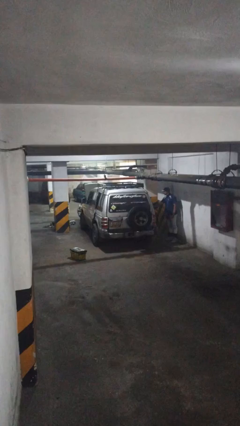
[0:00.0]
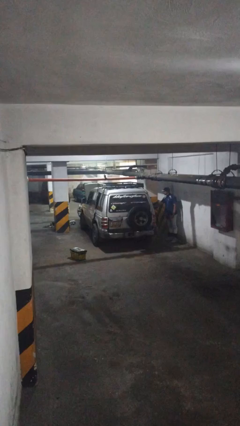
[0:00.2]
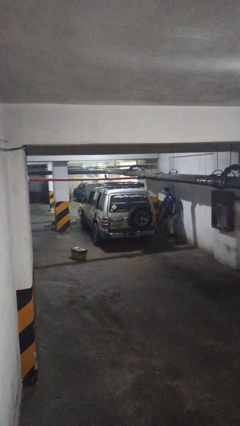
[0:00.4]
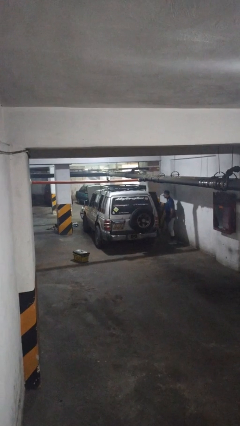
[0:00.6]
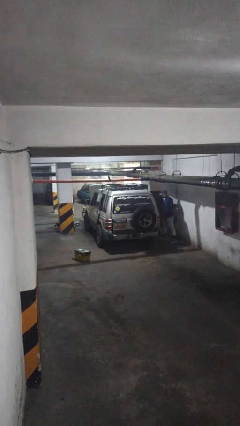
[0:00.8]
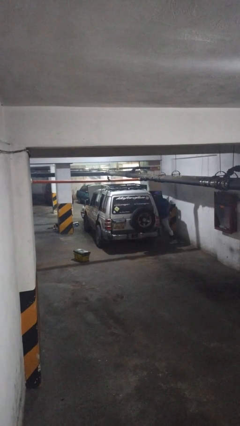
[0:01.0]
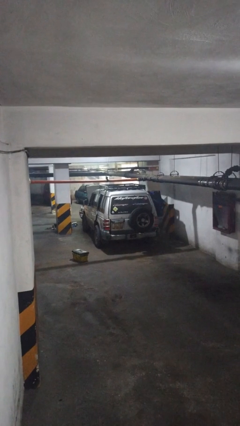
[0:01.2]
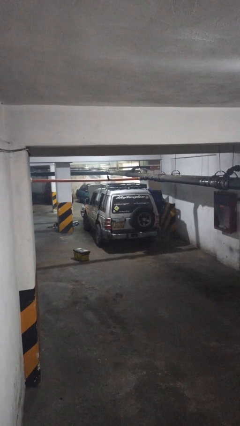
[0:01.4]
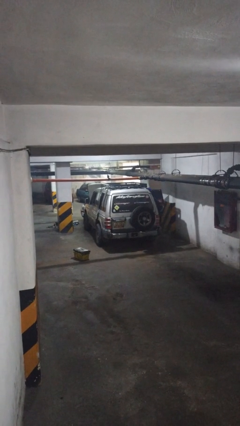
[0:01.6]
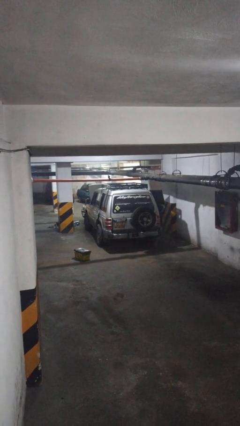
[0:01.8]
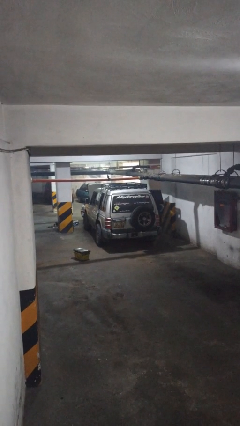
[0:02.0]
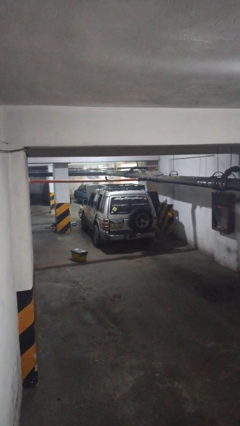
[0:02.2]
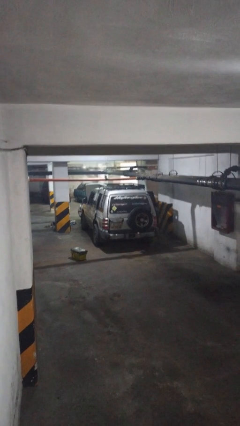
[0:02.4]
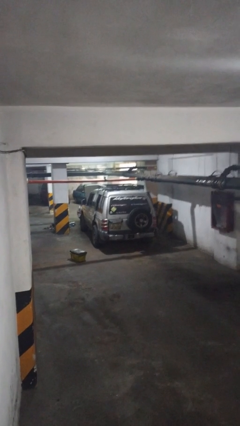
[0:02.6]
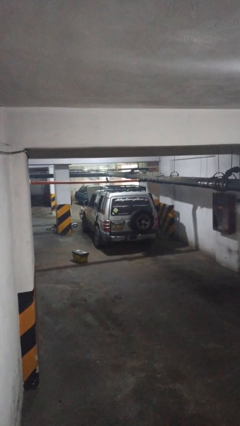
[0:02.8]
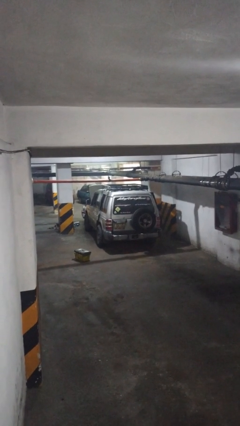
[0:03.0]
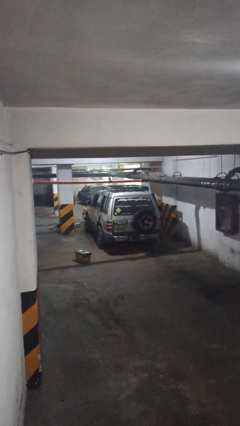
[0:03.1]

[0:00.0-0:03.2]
car picks up person

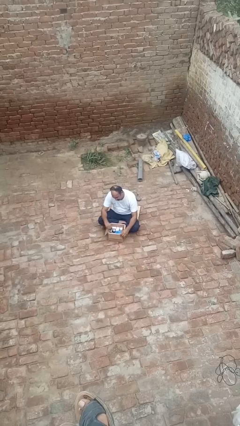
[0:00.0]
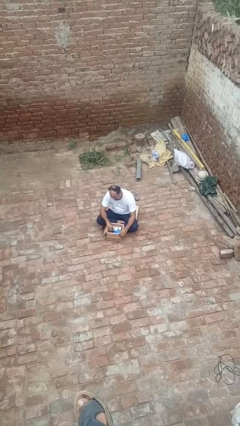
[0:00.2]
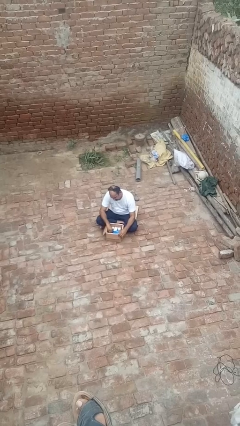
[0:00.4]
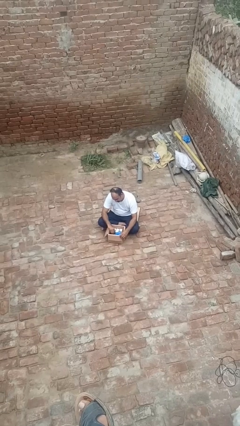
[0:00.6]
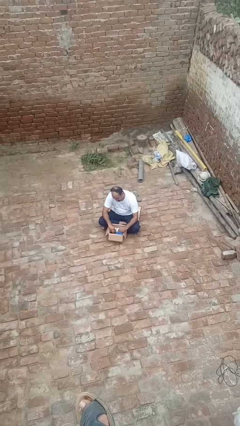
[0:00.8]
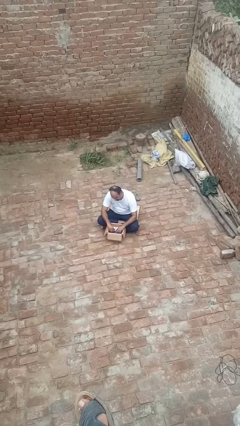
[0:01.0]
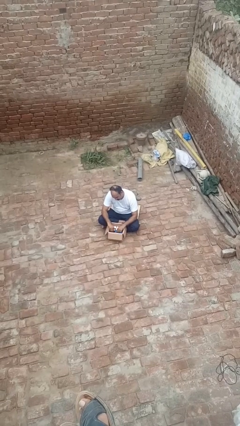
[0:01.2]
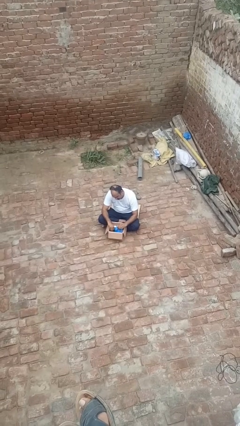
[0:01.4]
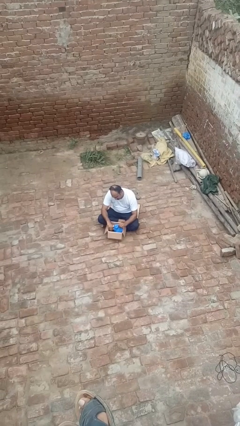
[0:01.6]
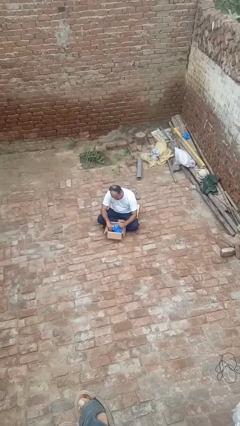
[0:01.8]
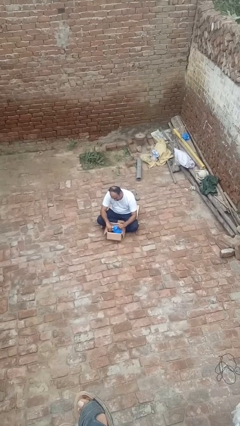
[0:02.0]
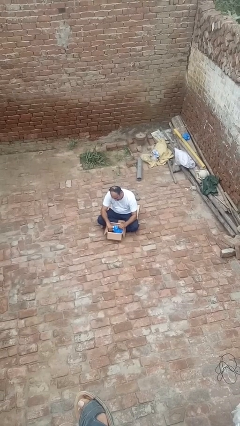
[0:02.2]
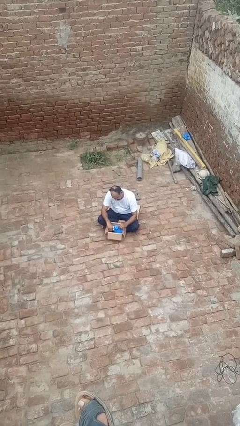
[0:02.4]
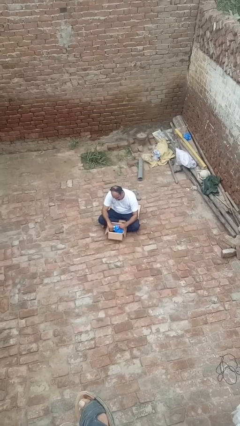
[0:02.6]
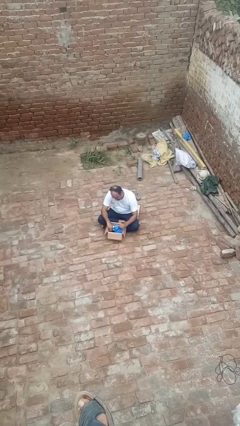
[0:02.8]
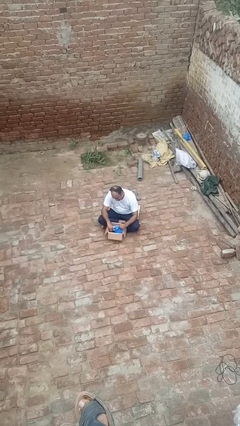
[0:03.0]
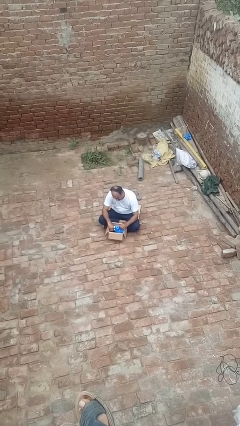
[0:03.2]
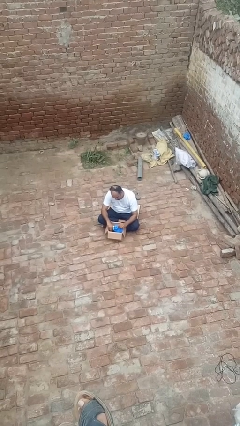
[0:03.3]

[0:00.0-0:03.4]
person searches in box

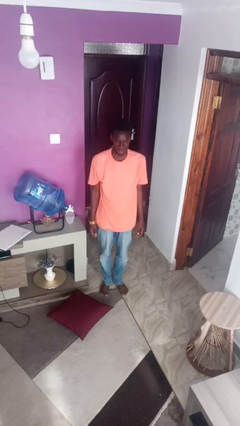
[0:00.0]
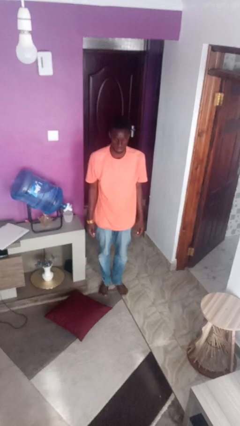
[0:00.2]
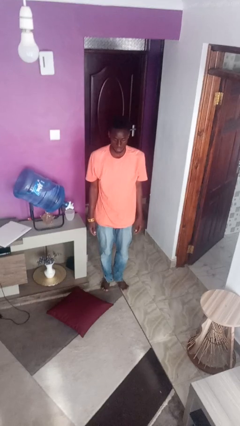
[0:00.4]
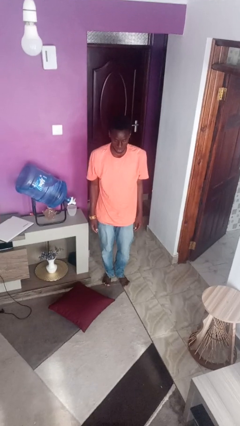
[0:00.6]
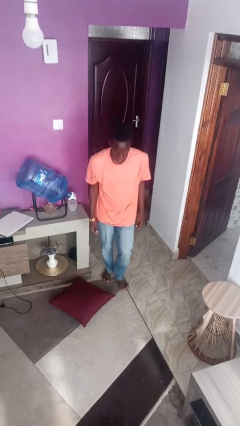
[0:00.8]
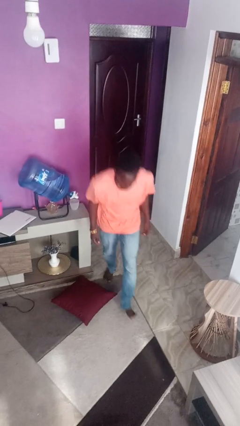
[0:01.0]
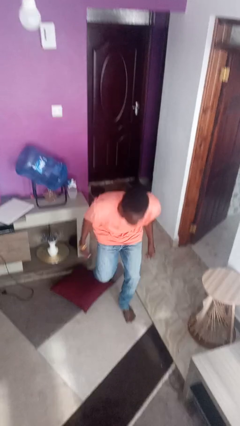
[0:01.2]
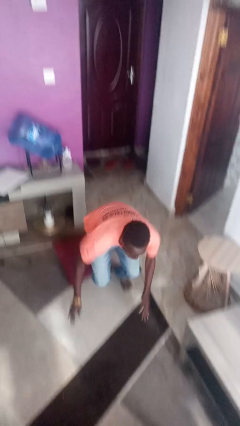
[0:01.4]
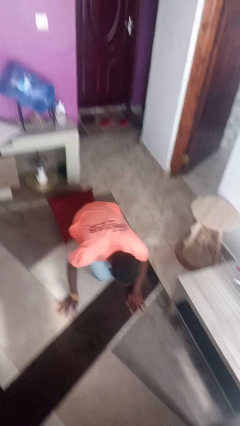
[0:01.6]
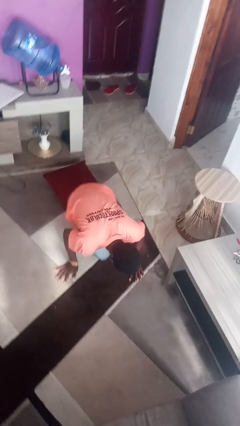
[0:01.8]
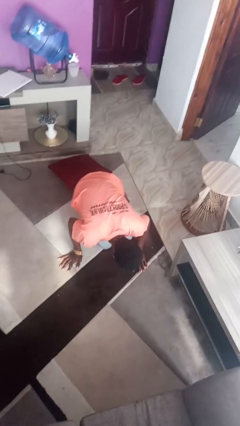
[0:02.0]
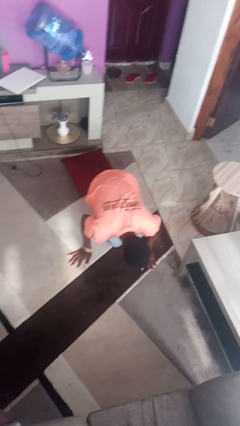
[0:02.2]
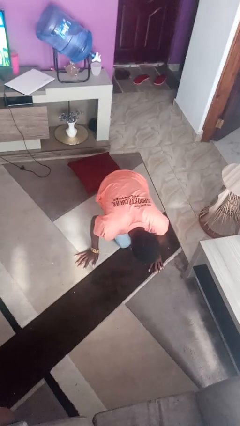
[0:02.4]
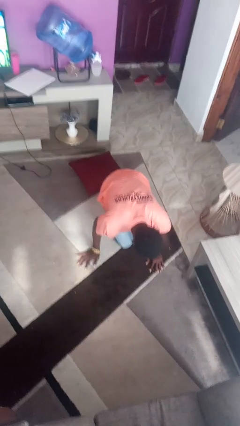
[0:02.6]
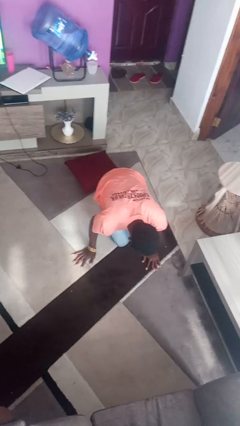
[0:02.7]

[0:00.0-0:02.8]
person trips on object on floor

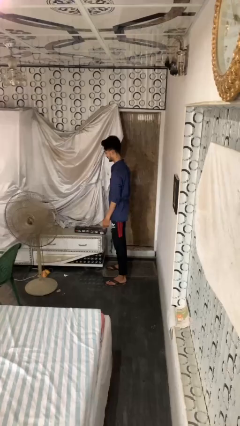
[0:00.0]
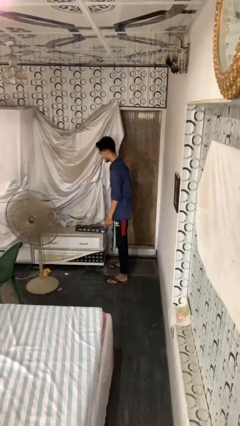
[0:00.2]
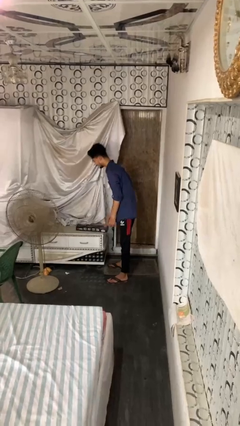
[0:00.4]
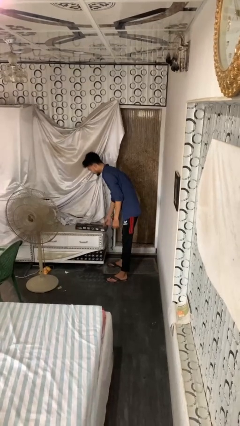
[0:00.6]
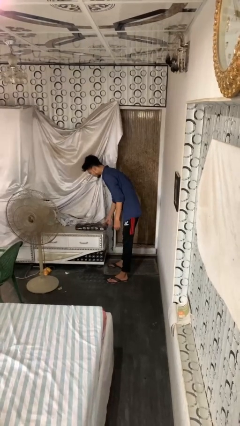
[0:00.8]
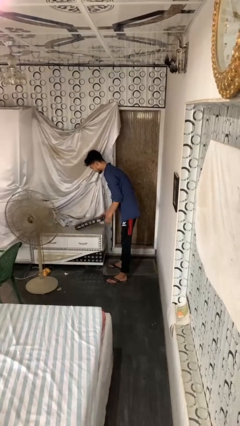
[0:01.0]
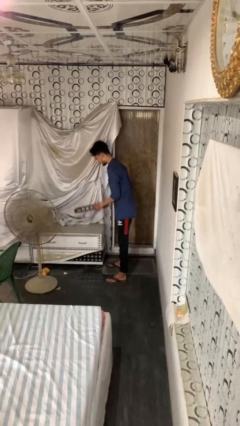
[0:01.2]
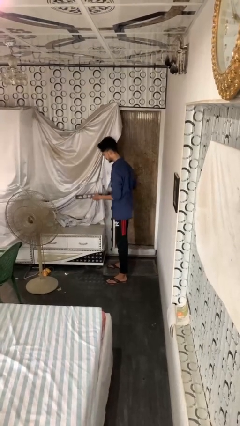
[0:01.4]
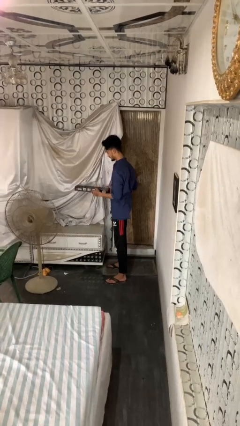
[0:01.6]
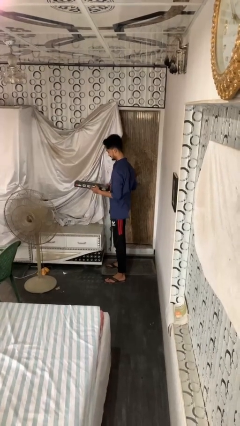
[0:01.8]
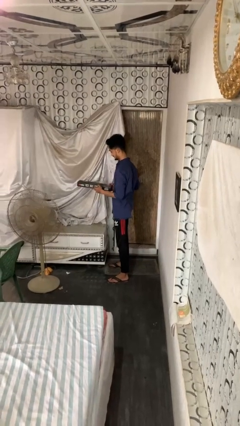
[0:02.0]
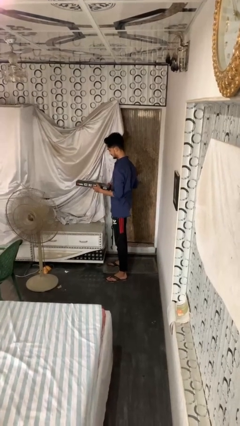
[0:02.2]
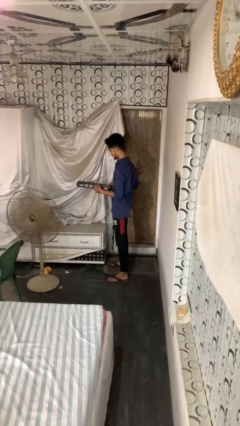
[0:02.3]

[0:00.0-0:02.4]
person picks up object from countertop

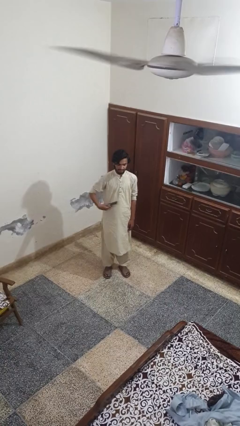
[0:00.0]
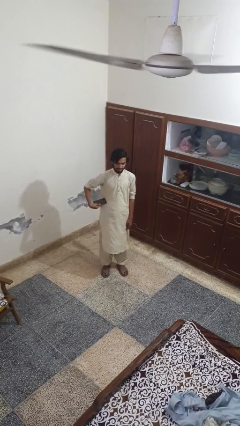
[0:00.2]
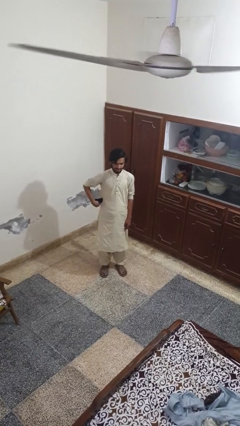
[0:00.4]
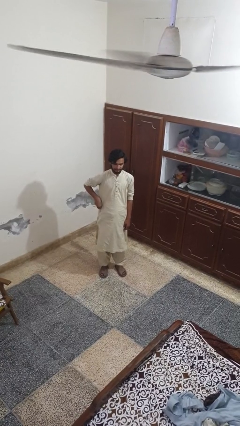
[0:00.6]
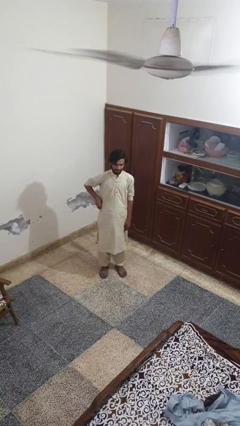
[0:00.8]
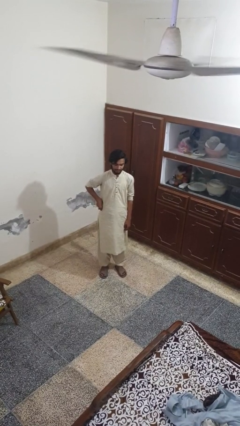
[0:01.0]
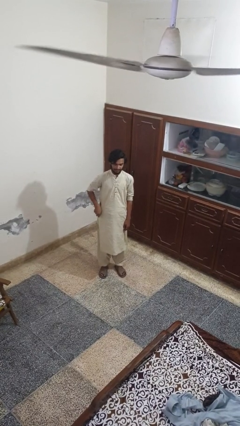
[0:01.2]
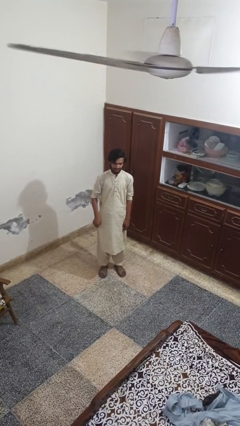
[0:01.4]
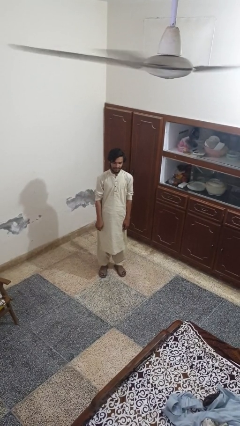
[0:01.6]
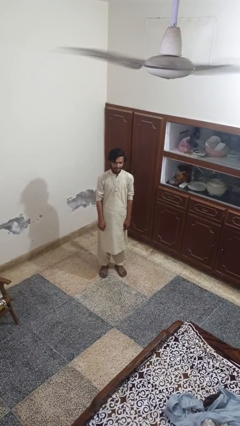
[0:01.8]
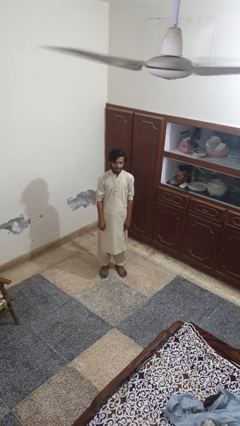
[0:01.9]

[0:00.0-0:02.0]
person puts phone into pocket

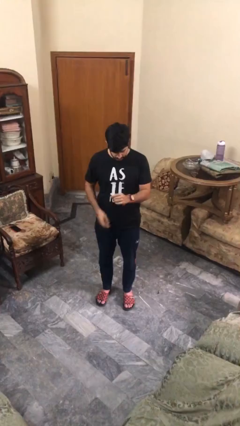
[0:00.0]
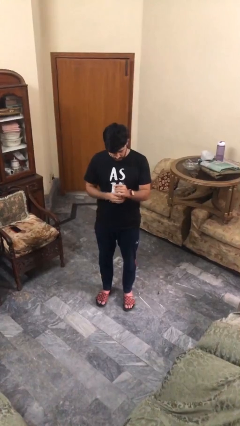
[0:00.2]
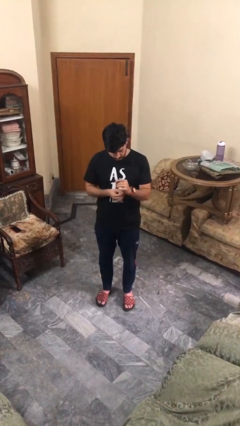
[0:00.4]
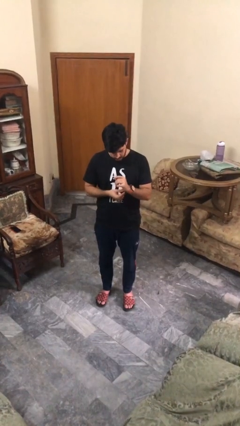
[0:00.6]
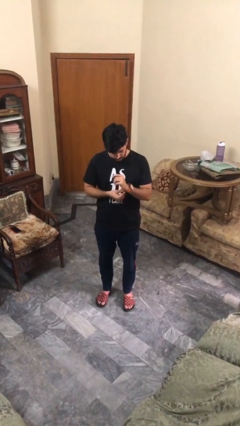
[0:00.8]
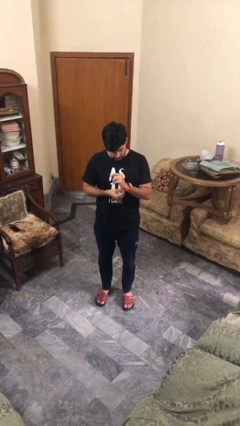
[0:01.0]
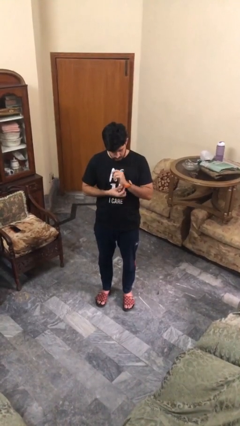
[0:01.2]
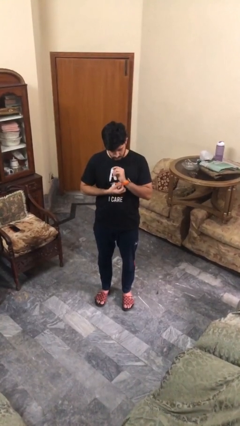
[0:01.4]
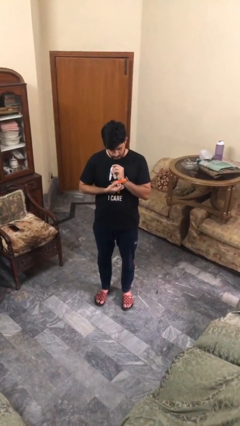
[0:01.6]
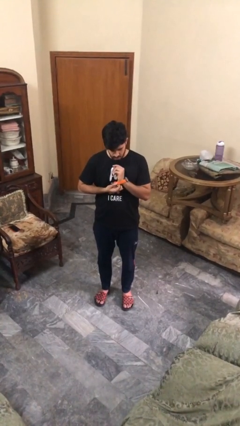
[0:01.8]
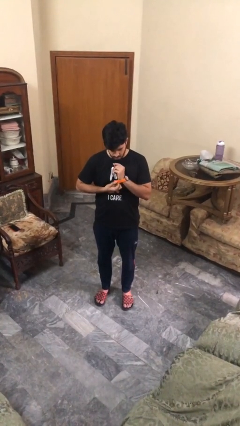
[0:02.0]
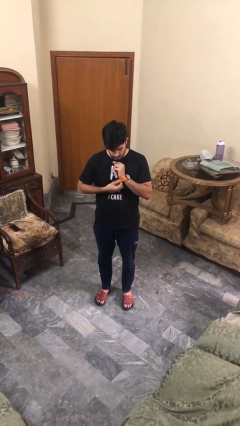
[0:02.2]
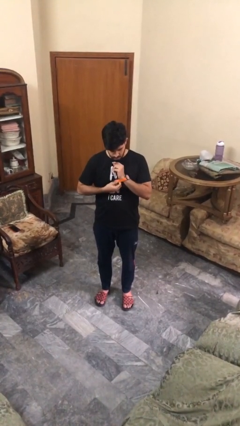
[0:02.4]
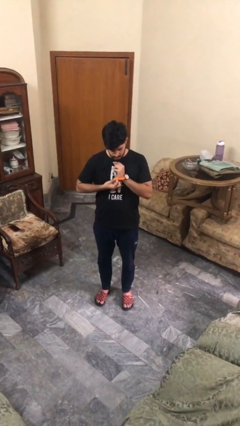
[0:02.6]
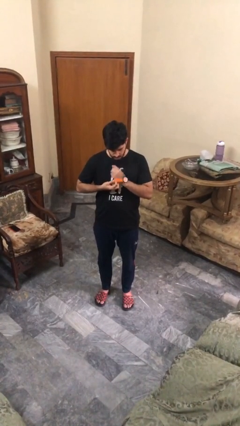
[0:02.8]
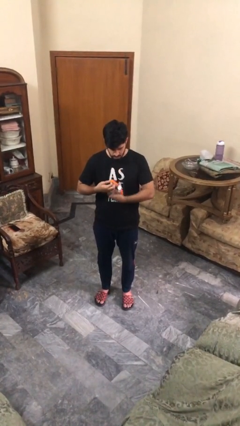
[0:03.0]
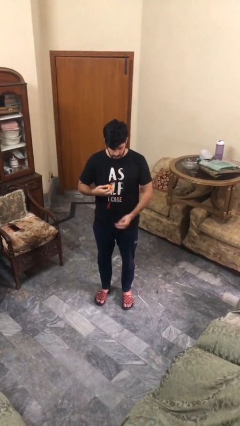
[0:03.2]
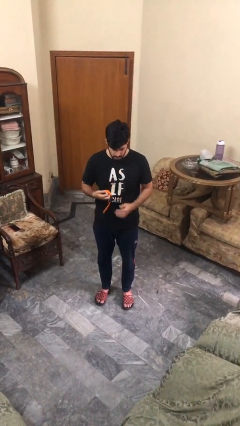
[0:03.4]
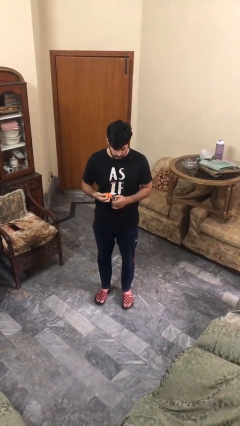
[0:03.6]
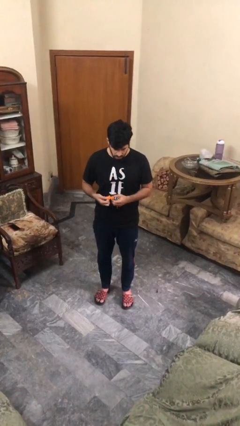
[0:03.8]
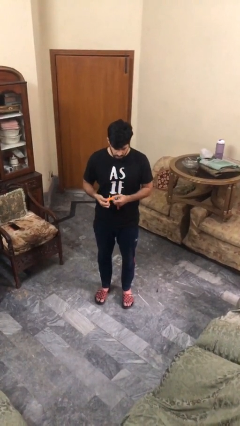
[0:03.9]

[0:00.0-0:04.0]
person takes off wristwatch
